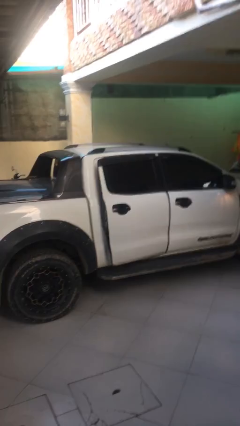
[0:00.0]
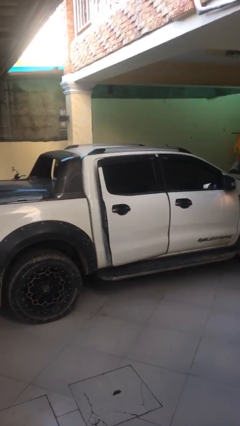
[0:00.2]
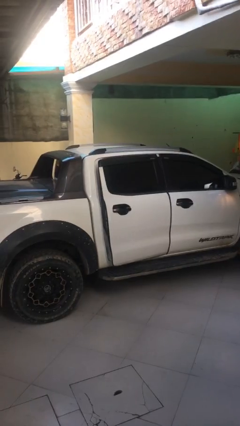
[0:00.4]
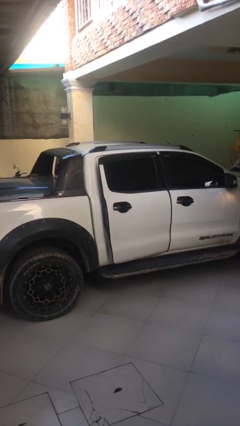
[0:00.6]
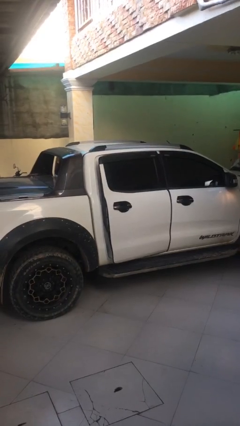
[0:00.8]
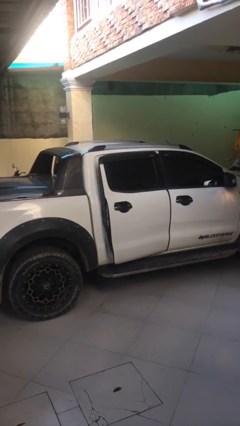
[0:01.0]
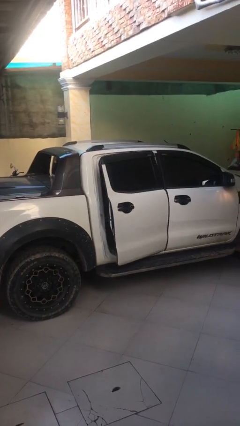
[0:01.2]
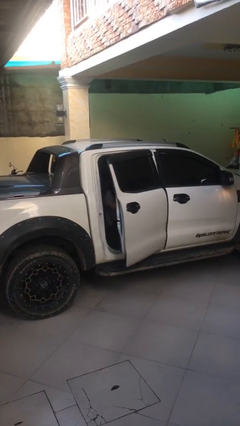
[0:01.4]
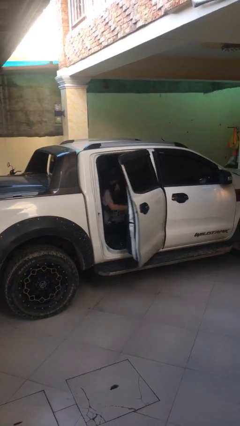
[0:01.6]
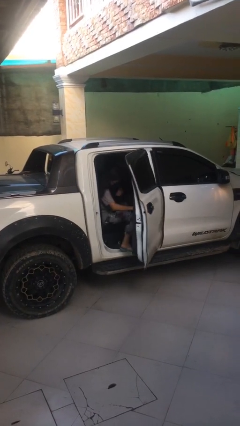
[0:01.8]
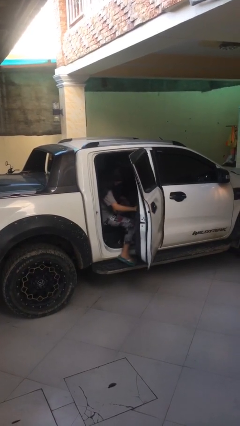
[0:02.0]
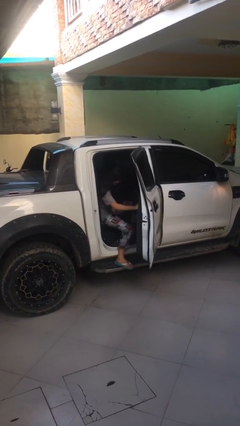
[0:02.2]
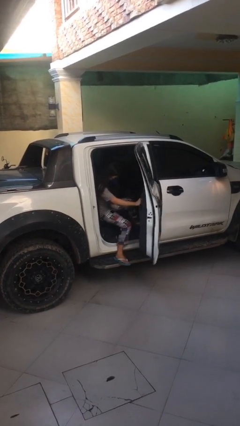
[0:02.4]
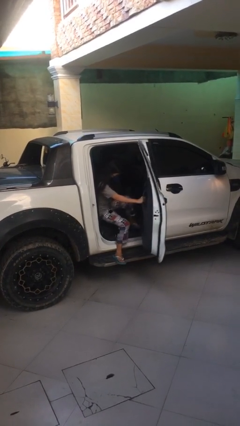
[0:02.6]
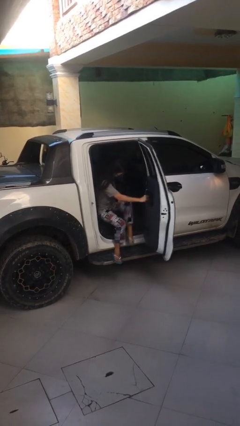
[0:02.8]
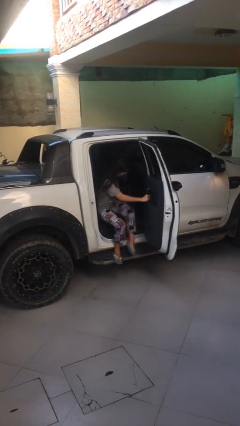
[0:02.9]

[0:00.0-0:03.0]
person opens car door

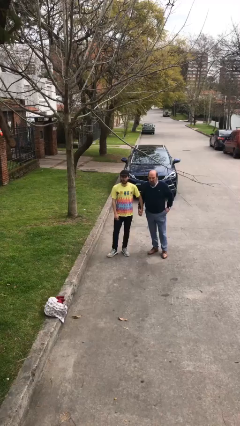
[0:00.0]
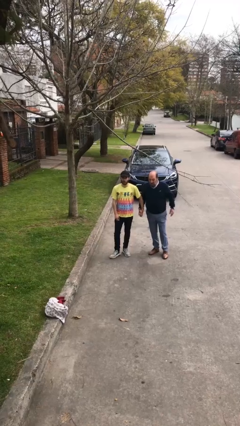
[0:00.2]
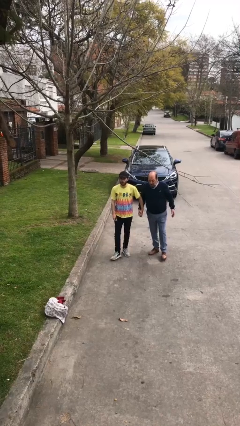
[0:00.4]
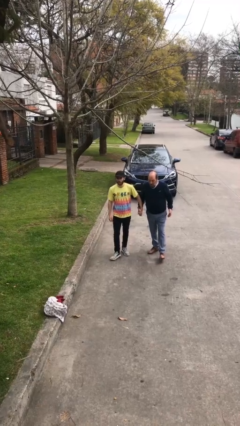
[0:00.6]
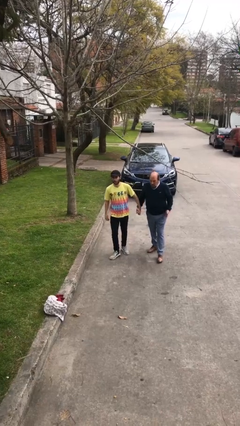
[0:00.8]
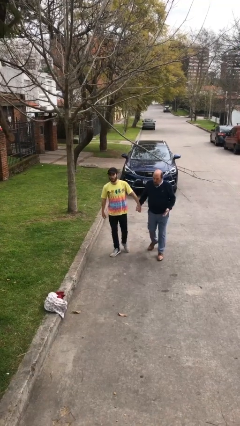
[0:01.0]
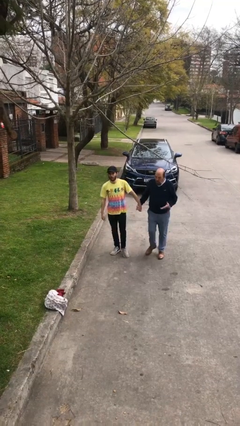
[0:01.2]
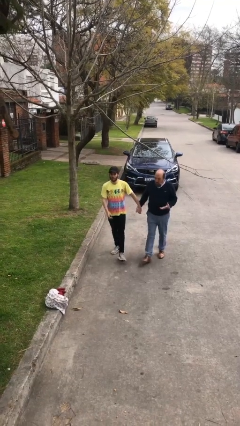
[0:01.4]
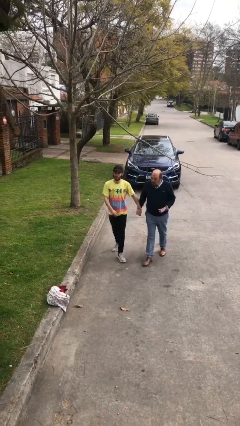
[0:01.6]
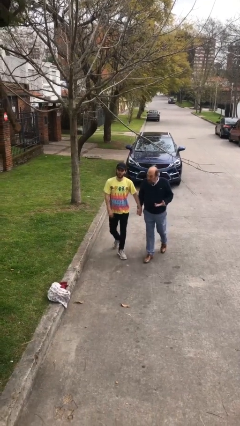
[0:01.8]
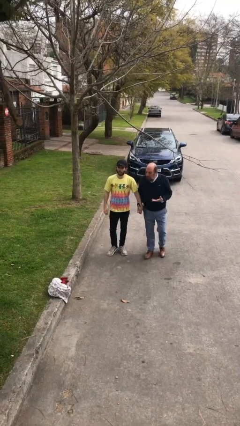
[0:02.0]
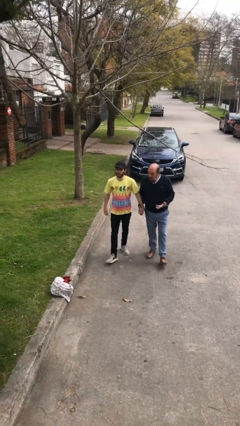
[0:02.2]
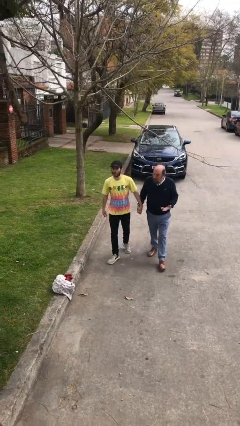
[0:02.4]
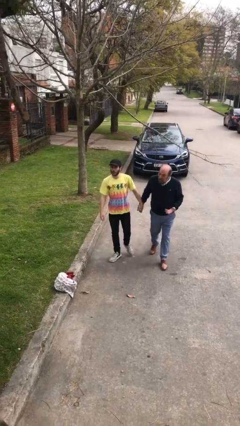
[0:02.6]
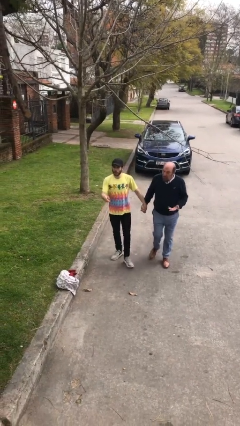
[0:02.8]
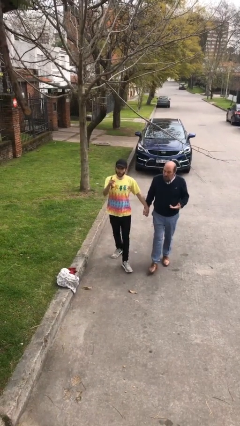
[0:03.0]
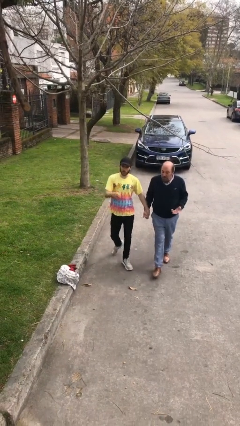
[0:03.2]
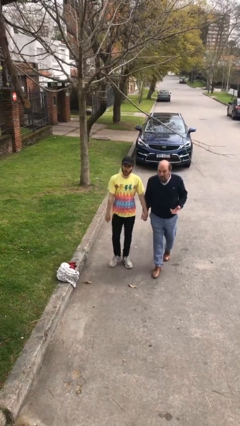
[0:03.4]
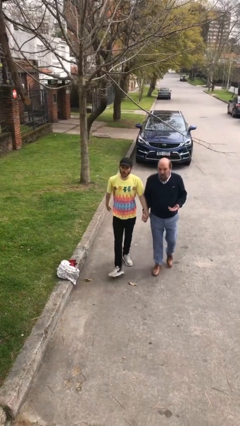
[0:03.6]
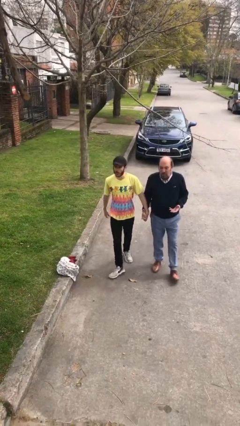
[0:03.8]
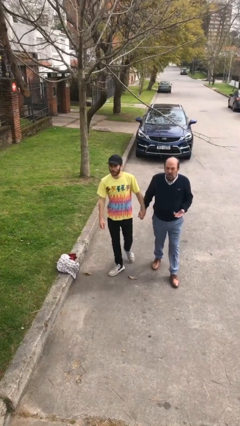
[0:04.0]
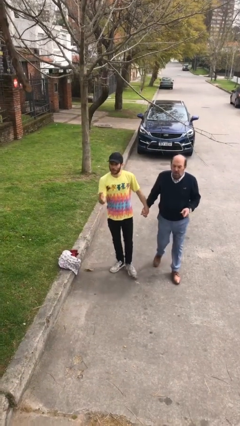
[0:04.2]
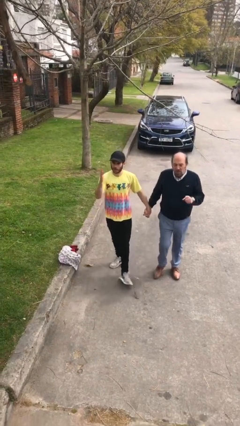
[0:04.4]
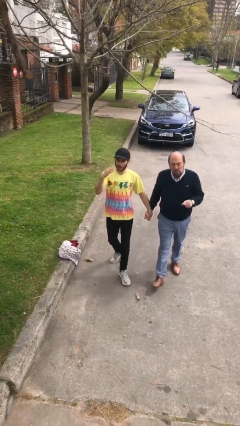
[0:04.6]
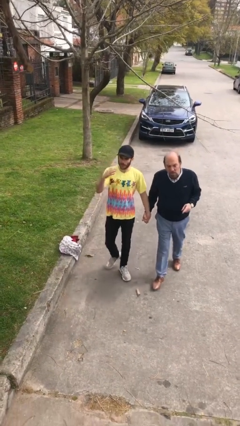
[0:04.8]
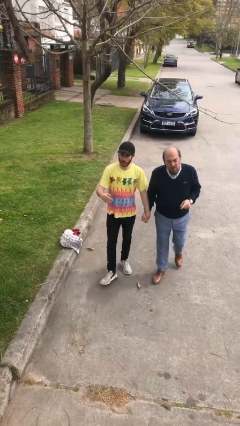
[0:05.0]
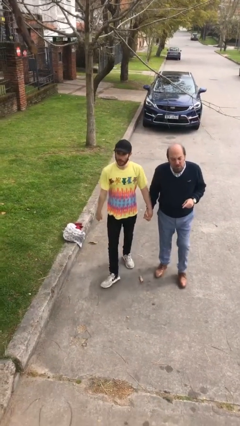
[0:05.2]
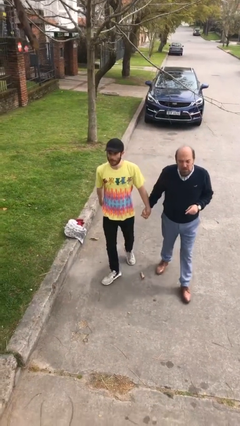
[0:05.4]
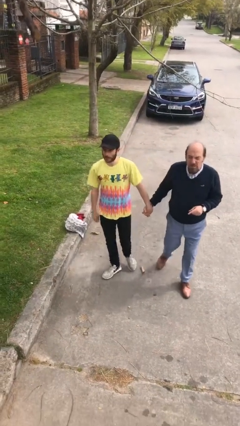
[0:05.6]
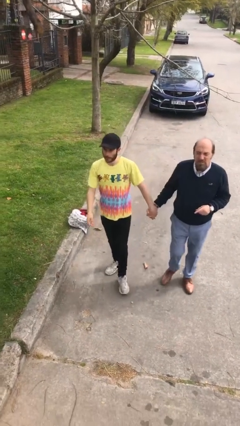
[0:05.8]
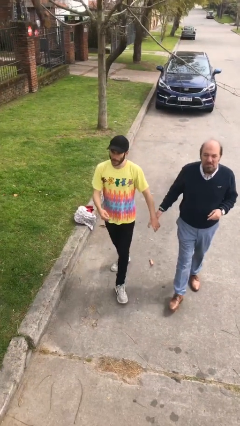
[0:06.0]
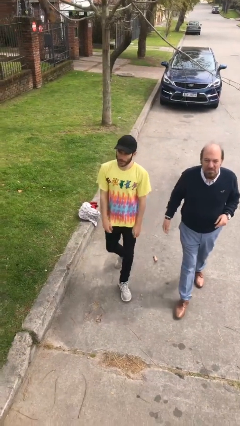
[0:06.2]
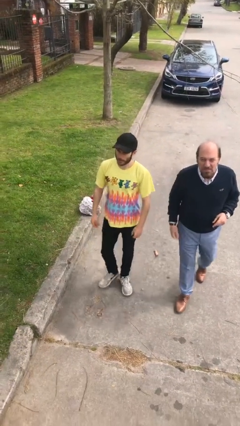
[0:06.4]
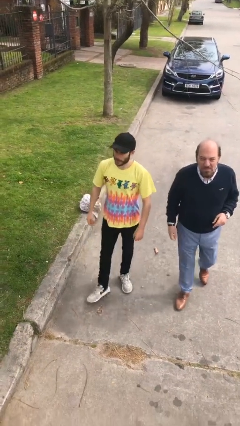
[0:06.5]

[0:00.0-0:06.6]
person holds hand

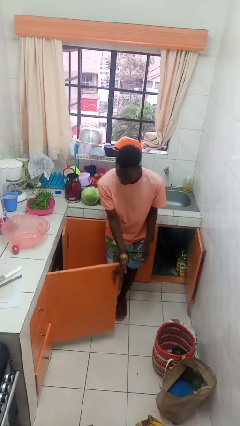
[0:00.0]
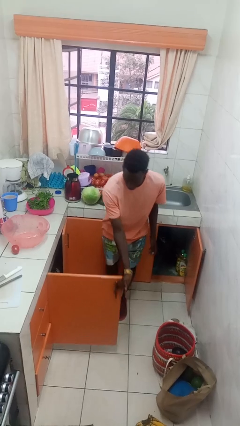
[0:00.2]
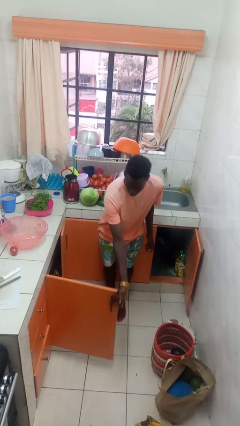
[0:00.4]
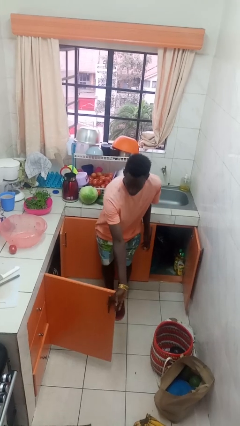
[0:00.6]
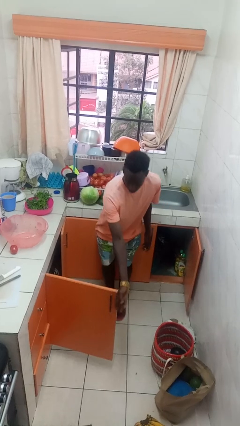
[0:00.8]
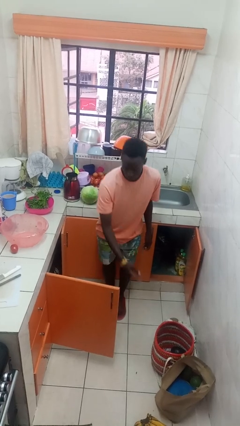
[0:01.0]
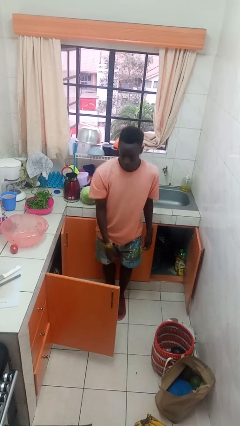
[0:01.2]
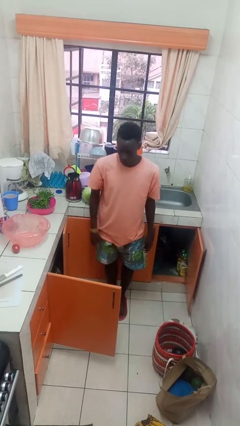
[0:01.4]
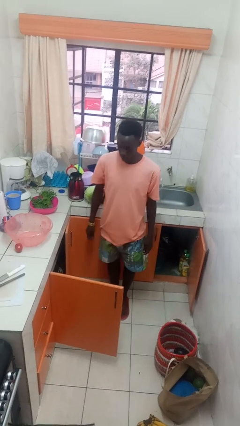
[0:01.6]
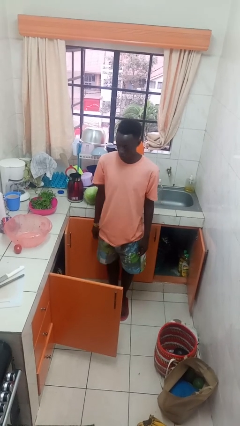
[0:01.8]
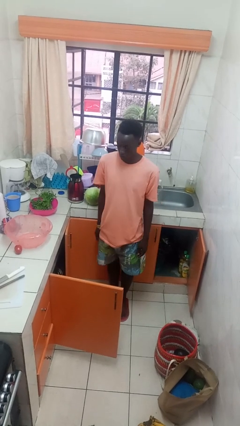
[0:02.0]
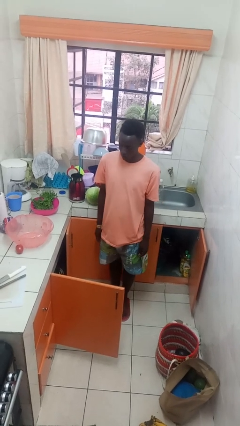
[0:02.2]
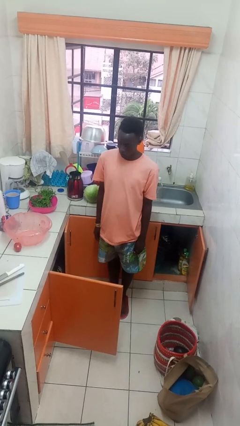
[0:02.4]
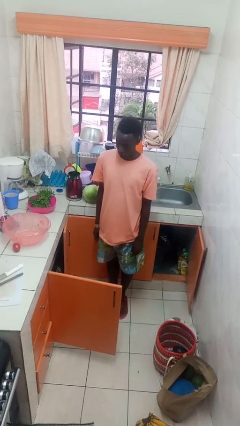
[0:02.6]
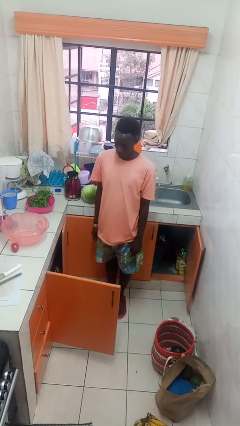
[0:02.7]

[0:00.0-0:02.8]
person opens cabinet

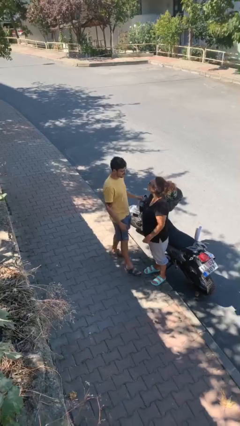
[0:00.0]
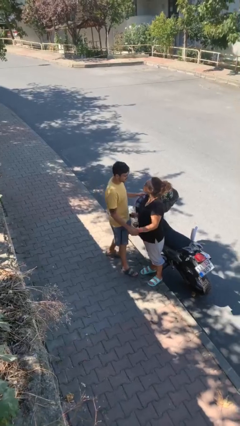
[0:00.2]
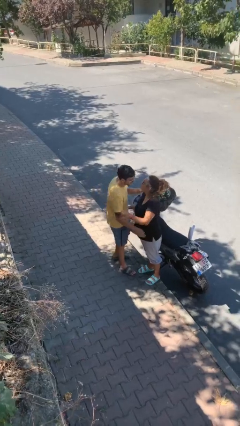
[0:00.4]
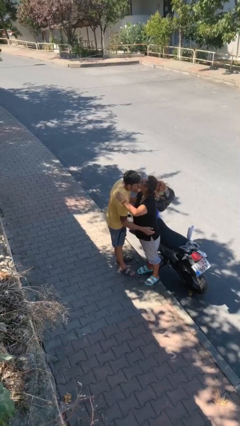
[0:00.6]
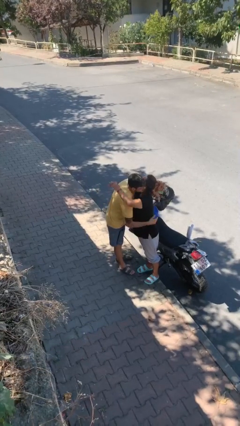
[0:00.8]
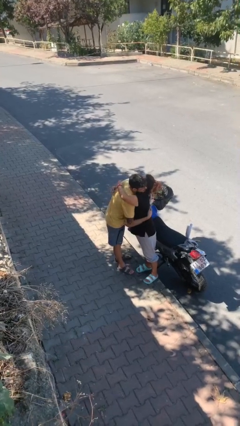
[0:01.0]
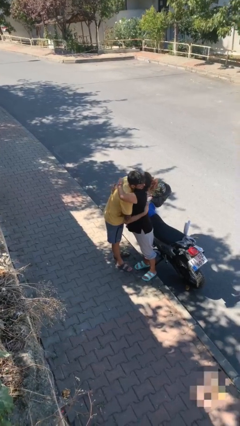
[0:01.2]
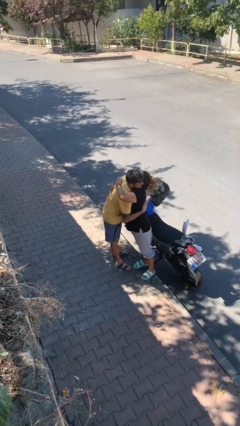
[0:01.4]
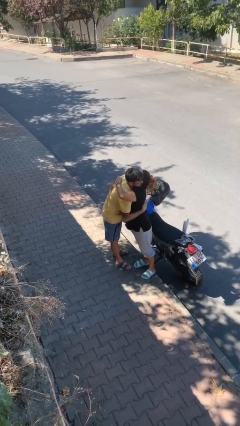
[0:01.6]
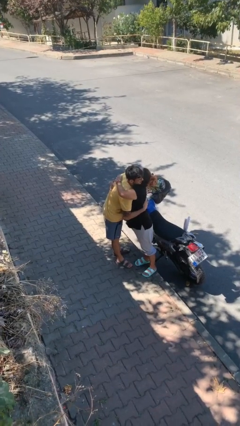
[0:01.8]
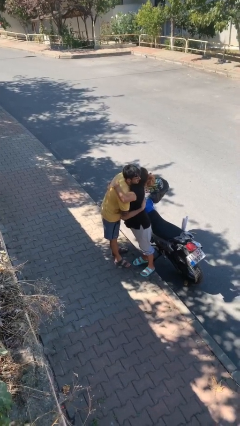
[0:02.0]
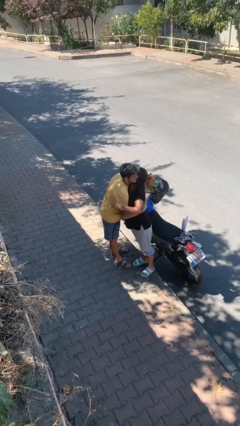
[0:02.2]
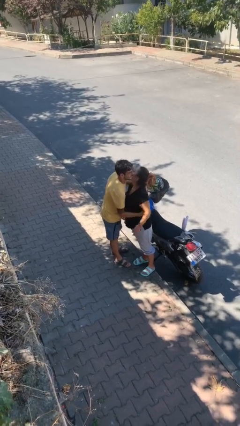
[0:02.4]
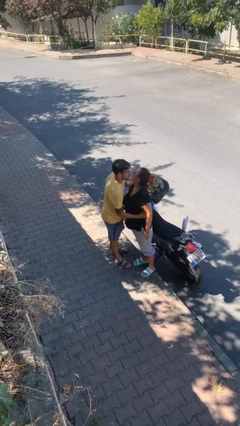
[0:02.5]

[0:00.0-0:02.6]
person embraces person

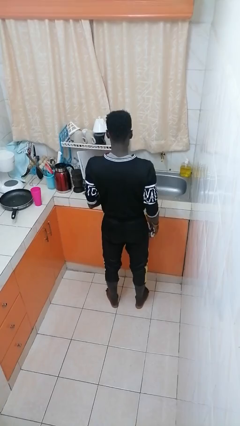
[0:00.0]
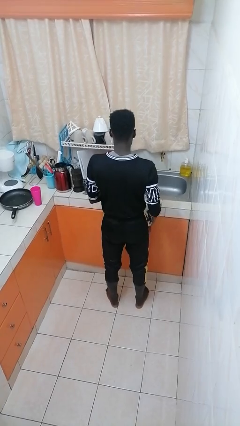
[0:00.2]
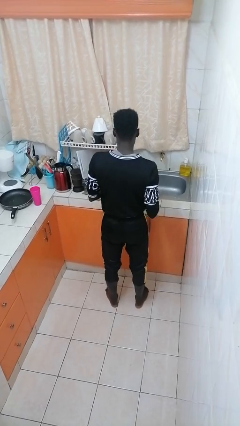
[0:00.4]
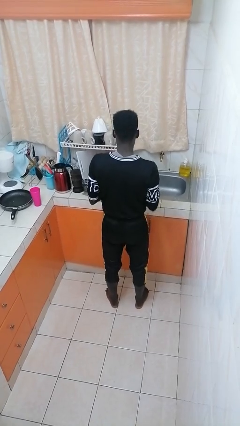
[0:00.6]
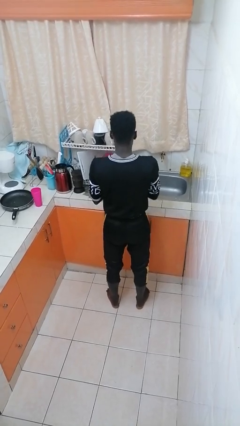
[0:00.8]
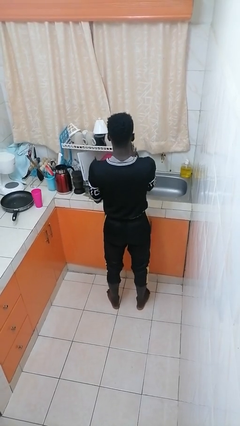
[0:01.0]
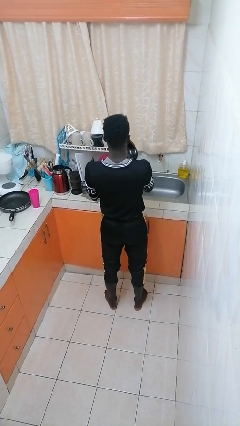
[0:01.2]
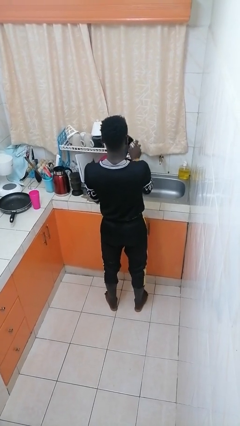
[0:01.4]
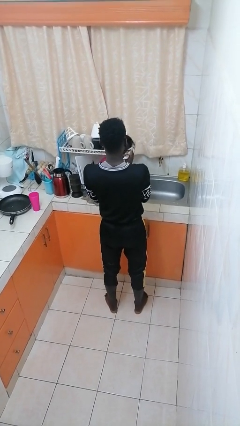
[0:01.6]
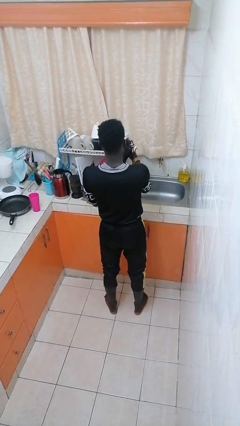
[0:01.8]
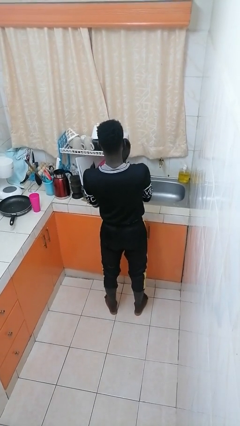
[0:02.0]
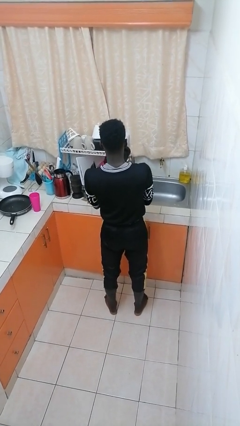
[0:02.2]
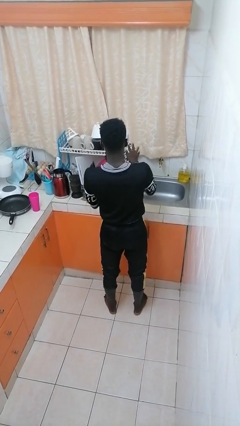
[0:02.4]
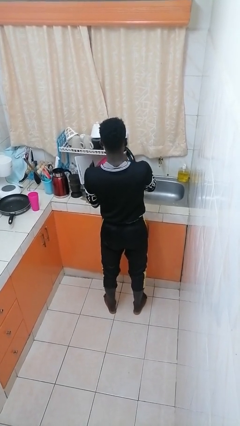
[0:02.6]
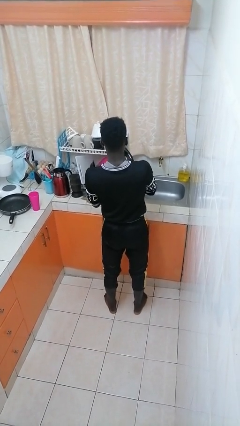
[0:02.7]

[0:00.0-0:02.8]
person dries dish
